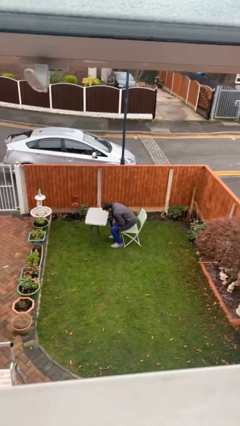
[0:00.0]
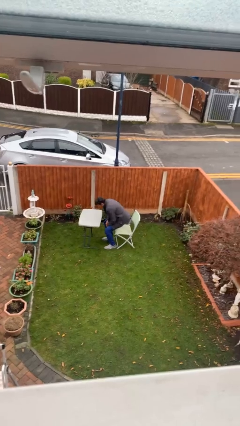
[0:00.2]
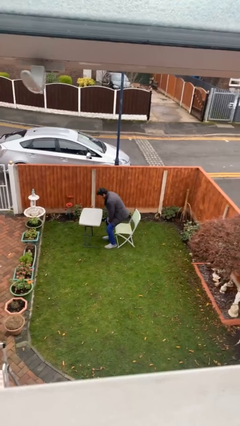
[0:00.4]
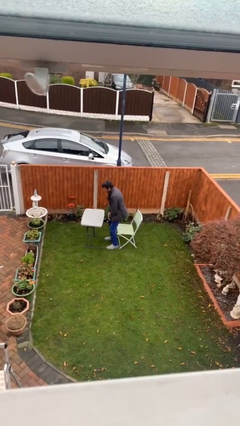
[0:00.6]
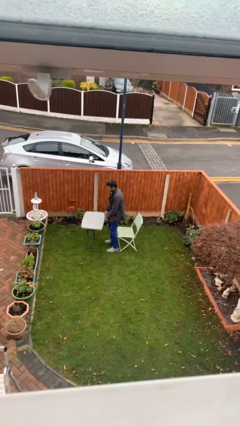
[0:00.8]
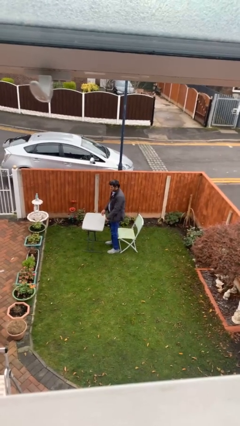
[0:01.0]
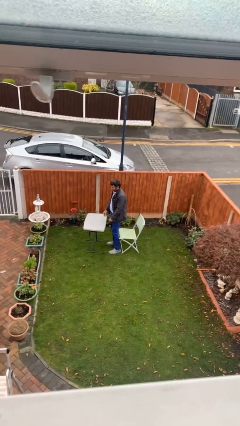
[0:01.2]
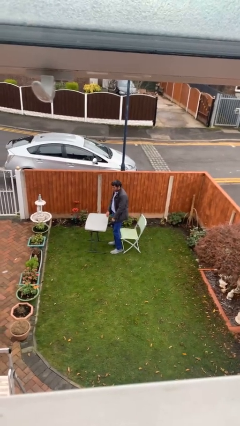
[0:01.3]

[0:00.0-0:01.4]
person stands up

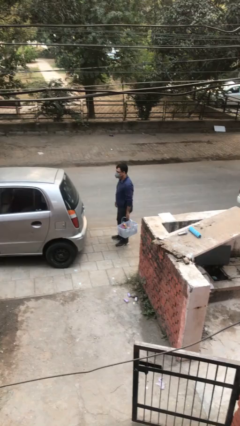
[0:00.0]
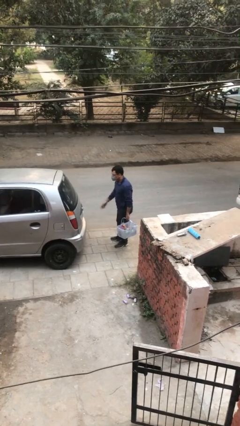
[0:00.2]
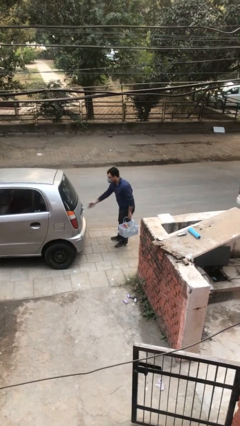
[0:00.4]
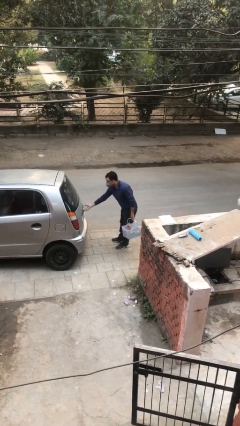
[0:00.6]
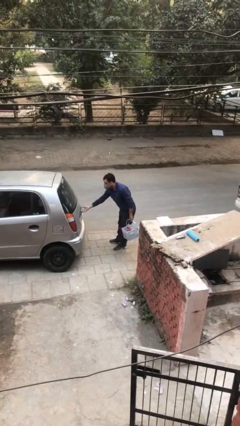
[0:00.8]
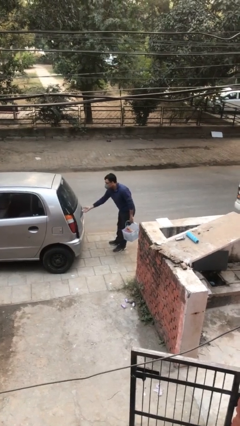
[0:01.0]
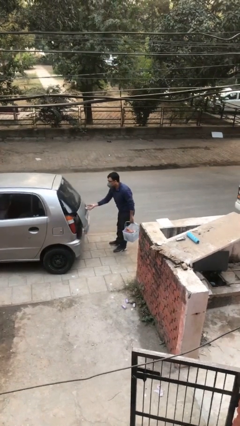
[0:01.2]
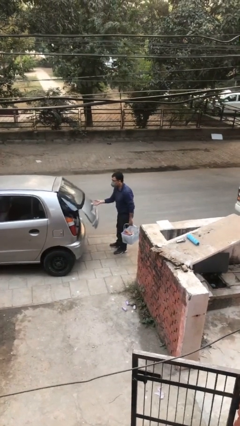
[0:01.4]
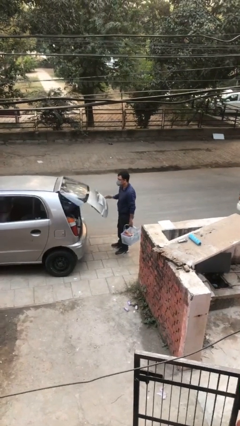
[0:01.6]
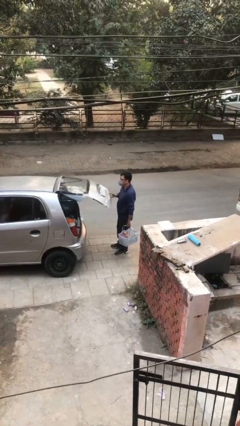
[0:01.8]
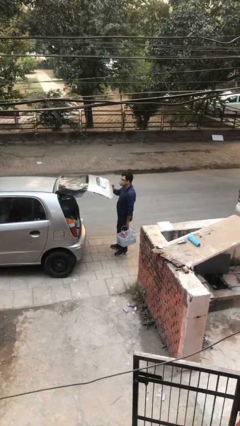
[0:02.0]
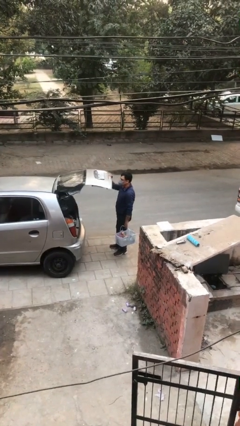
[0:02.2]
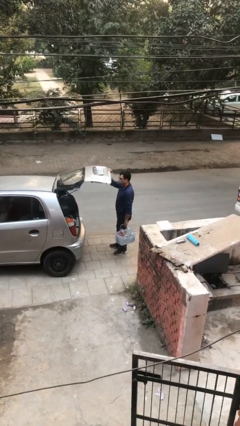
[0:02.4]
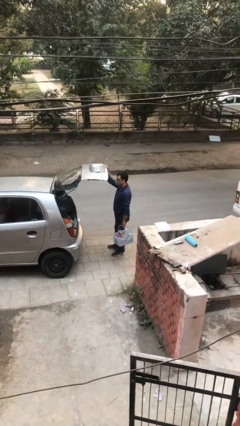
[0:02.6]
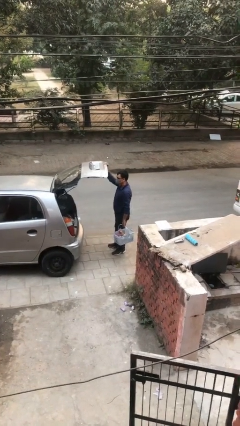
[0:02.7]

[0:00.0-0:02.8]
person opens car trunk

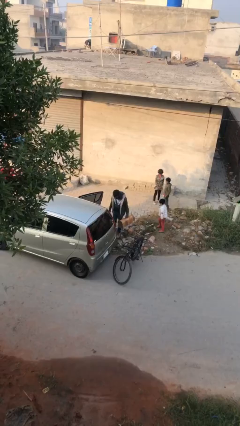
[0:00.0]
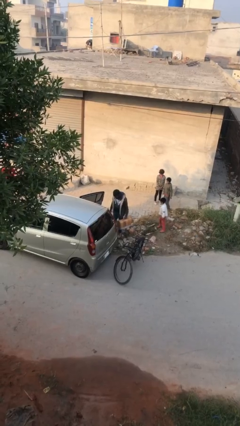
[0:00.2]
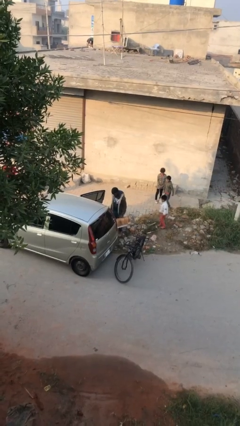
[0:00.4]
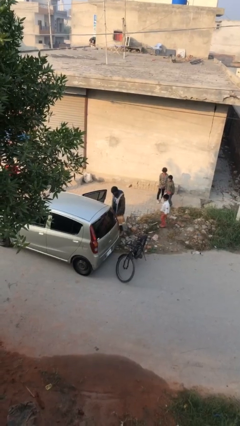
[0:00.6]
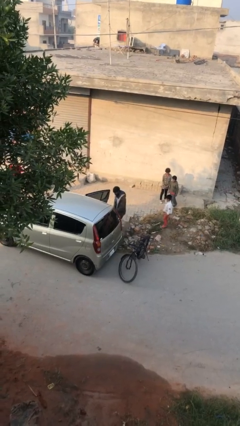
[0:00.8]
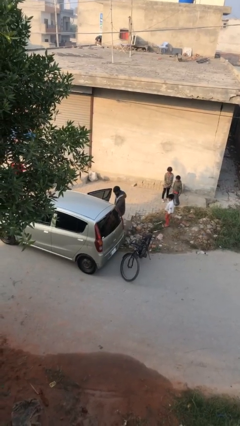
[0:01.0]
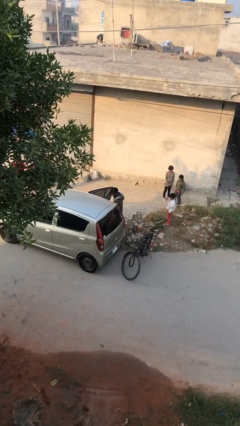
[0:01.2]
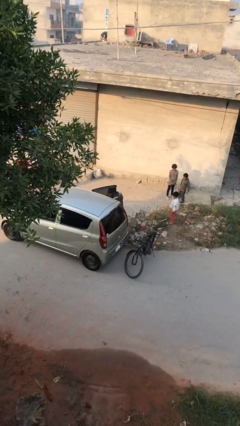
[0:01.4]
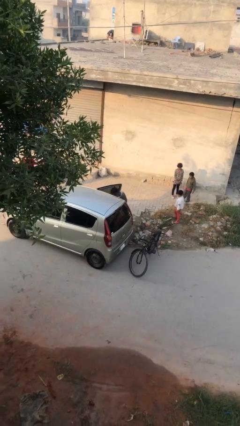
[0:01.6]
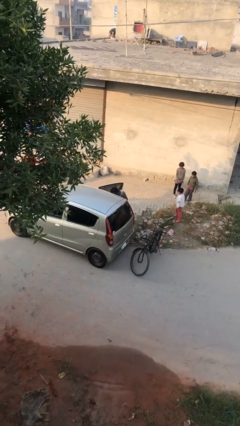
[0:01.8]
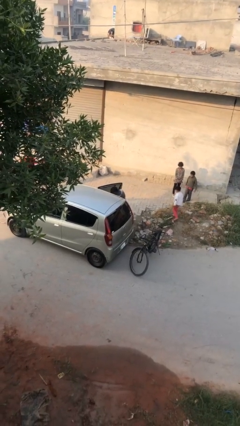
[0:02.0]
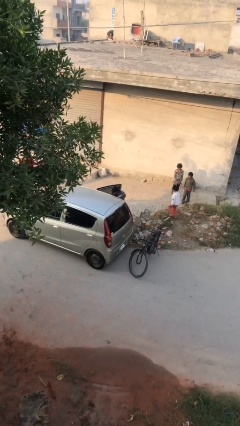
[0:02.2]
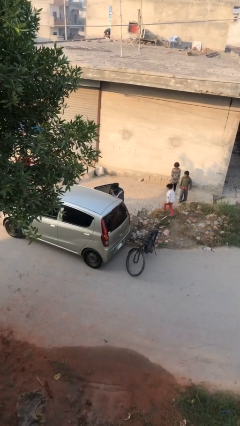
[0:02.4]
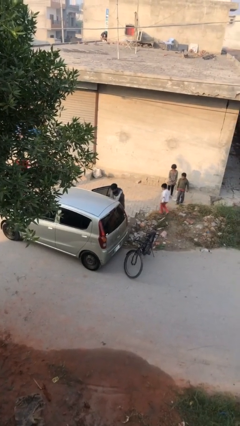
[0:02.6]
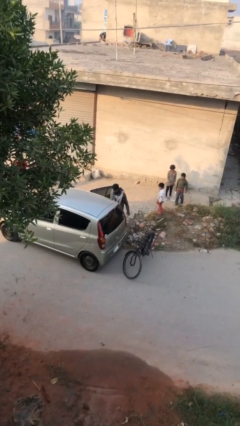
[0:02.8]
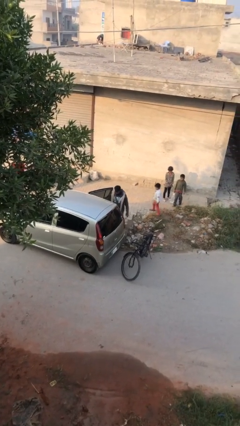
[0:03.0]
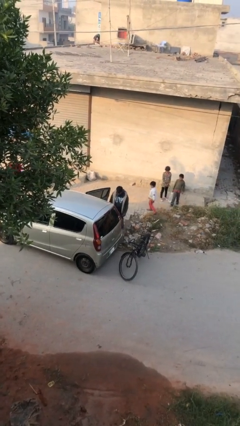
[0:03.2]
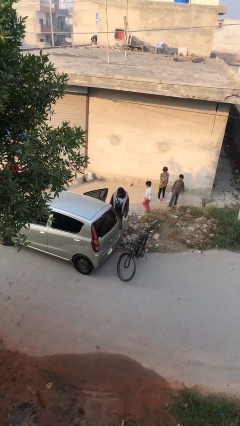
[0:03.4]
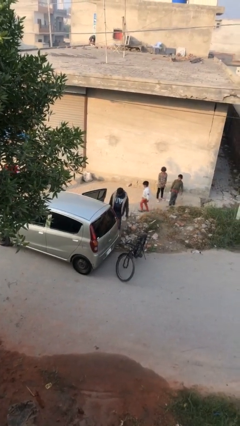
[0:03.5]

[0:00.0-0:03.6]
person loads car

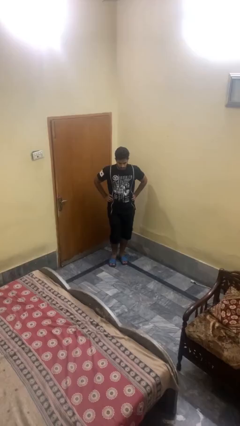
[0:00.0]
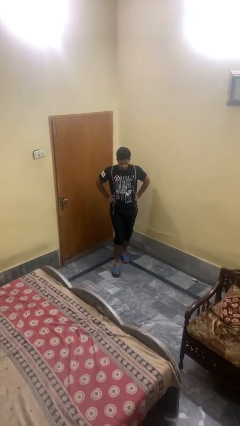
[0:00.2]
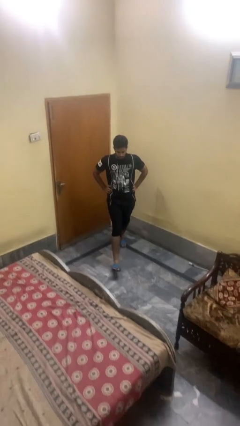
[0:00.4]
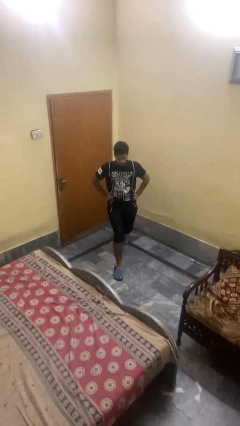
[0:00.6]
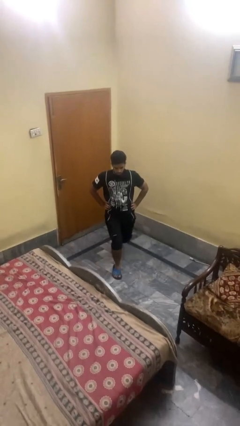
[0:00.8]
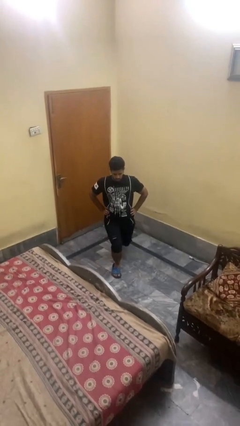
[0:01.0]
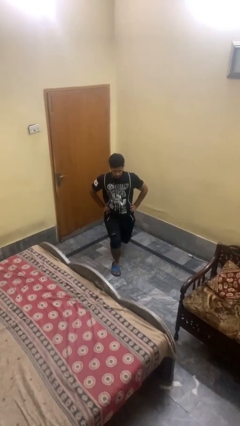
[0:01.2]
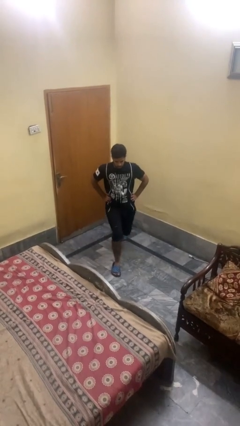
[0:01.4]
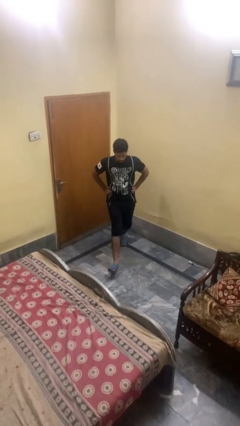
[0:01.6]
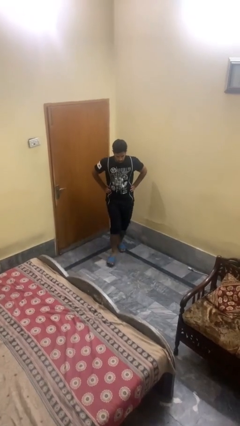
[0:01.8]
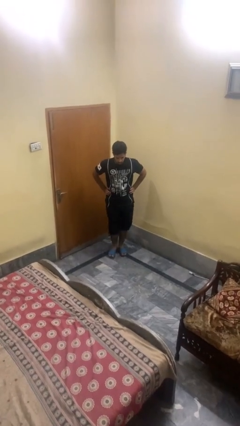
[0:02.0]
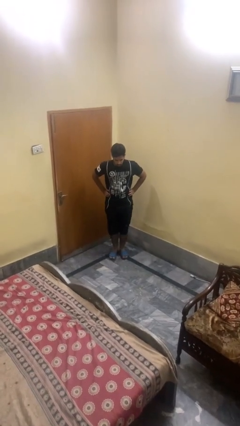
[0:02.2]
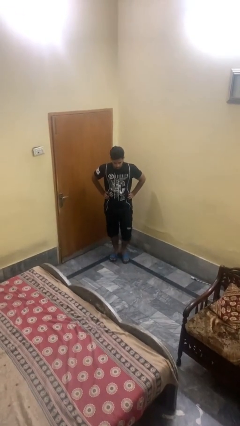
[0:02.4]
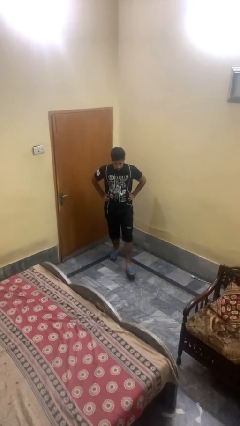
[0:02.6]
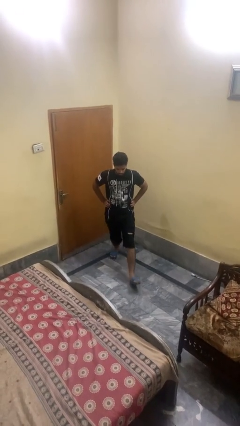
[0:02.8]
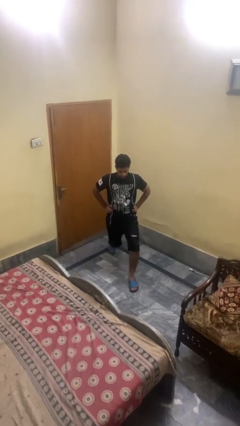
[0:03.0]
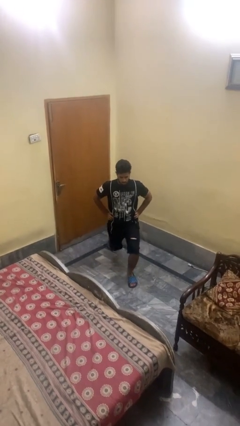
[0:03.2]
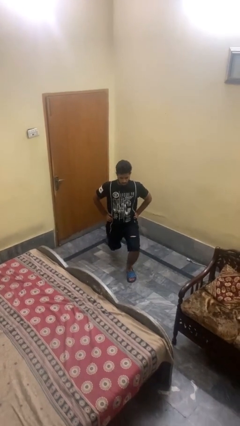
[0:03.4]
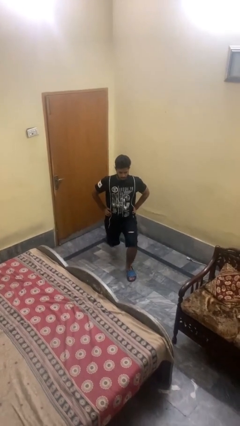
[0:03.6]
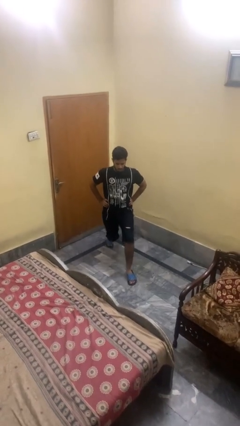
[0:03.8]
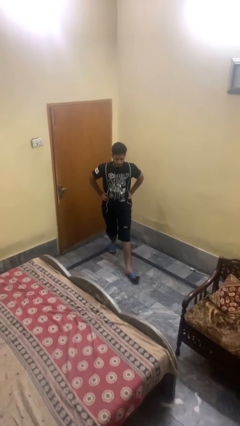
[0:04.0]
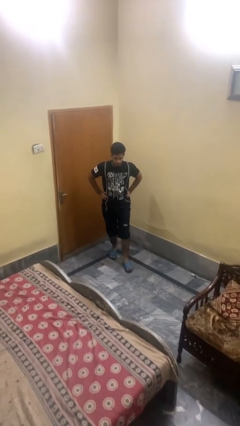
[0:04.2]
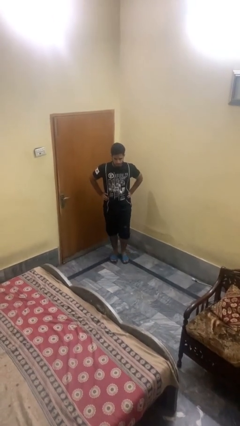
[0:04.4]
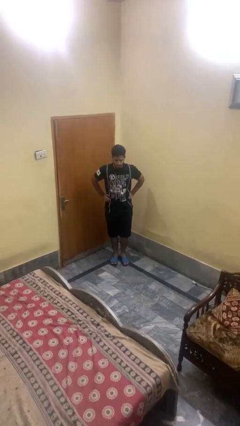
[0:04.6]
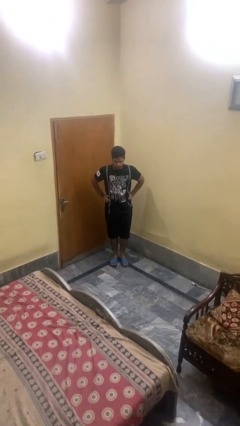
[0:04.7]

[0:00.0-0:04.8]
person exercises with lunges

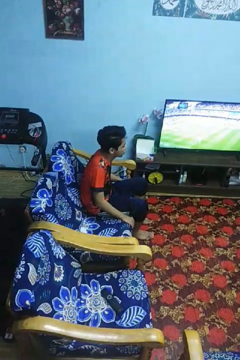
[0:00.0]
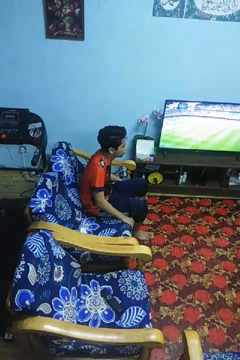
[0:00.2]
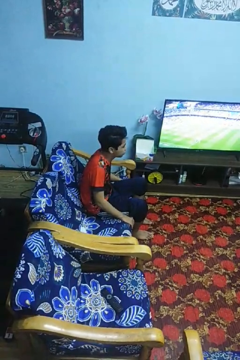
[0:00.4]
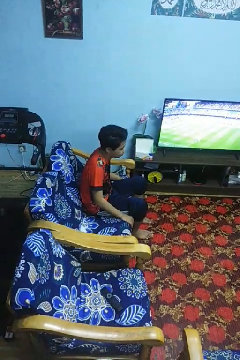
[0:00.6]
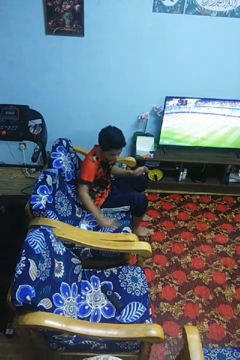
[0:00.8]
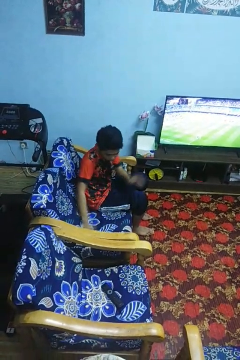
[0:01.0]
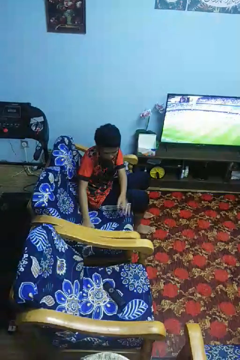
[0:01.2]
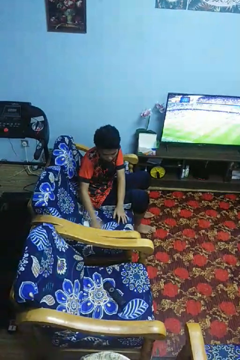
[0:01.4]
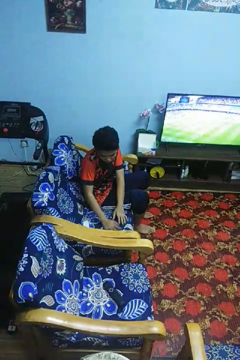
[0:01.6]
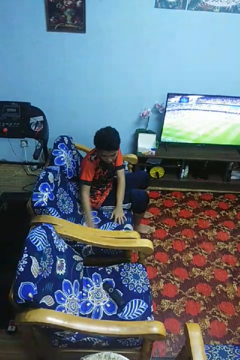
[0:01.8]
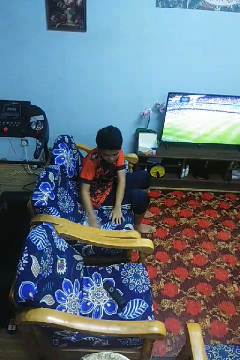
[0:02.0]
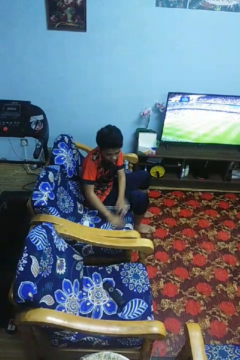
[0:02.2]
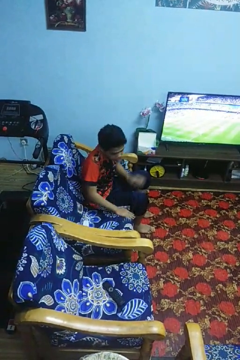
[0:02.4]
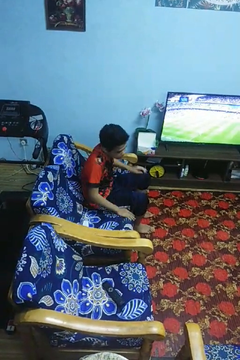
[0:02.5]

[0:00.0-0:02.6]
person searches in couch

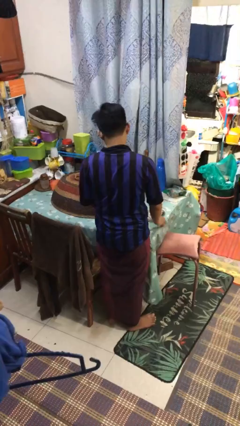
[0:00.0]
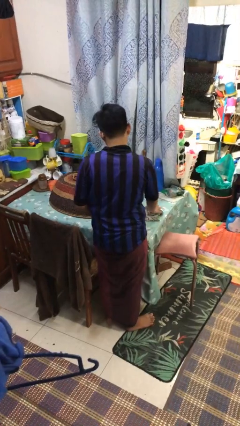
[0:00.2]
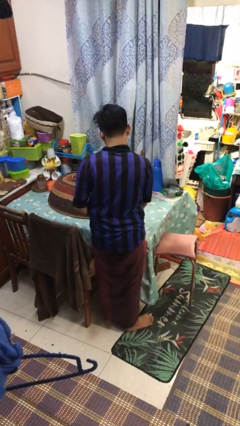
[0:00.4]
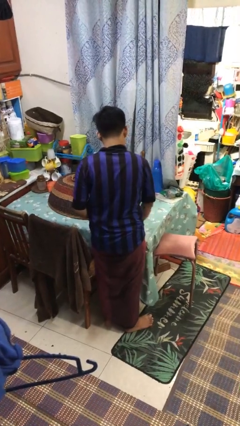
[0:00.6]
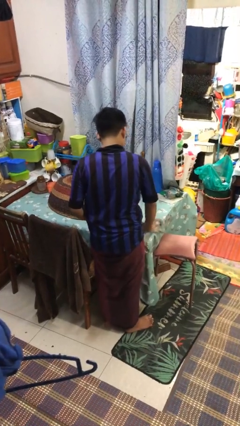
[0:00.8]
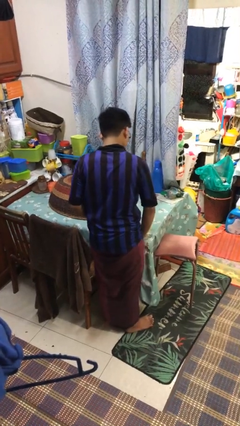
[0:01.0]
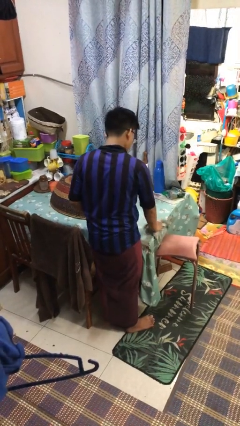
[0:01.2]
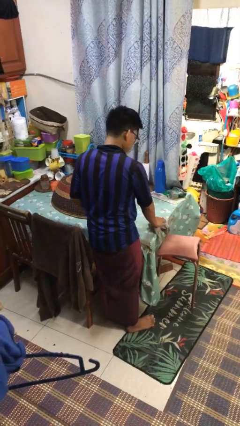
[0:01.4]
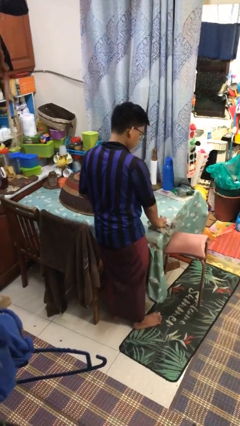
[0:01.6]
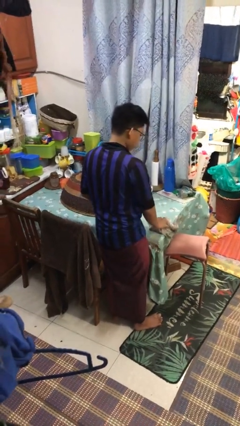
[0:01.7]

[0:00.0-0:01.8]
person cleans table with rag

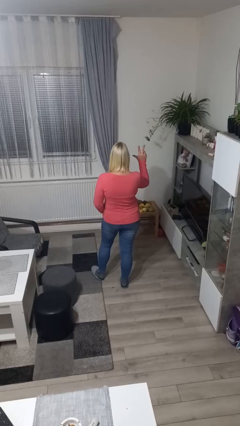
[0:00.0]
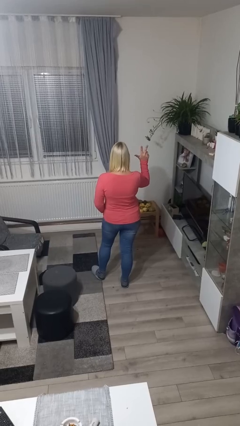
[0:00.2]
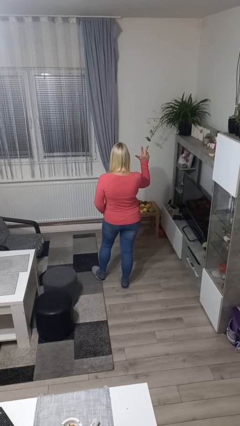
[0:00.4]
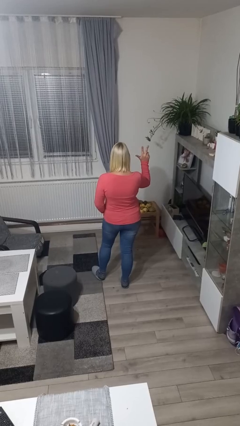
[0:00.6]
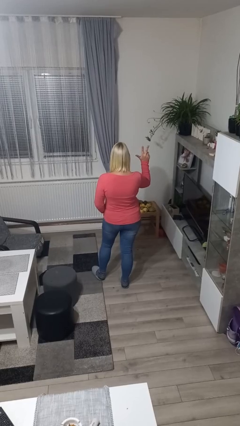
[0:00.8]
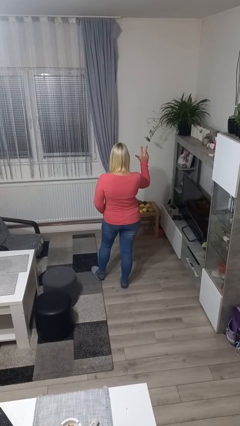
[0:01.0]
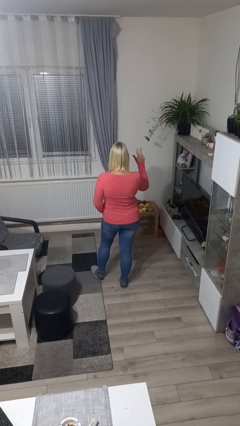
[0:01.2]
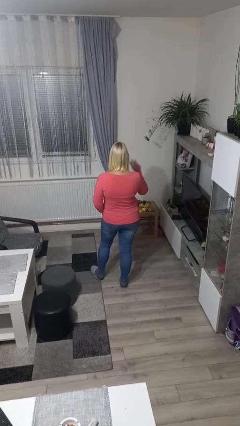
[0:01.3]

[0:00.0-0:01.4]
person gestures number three
